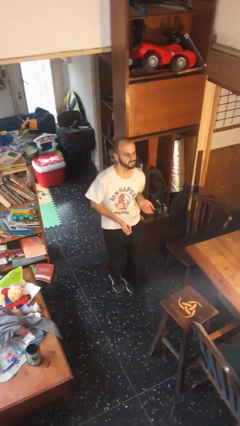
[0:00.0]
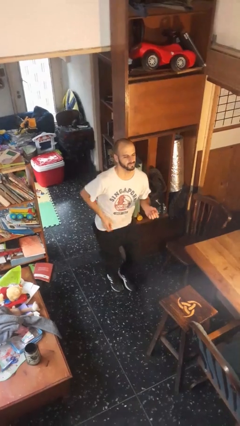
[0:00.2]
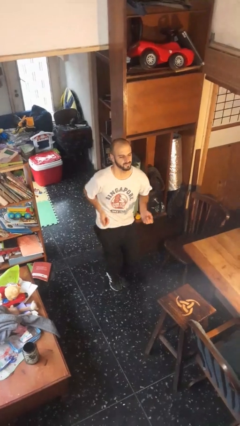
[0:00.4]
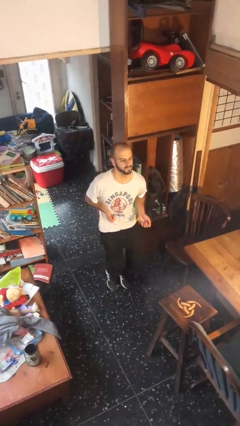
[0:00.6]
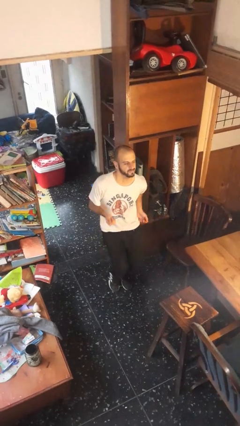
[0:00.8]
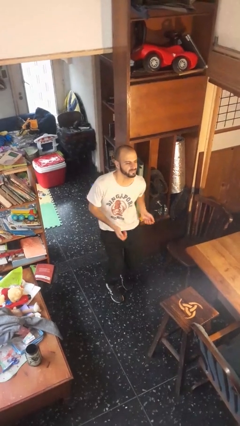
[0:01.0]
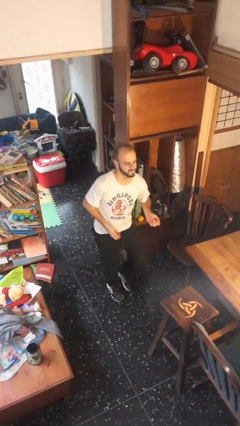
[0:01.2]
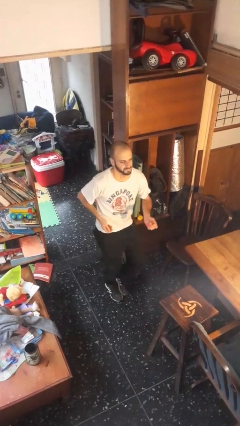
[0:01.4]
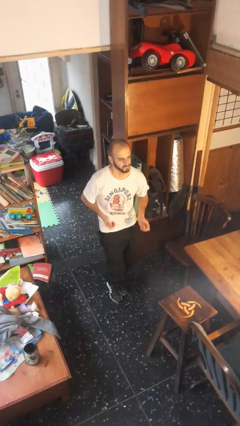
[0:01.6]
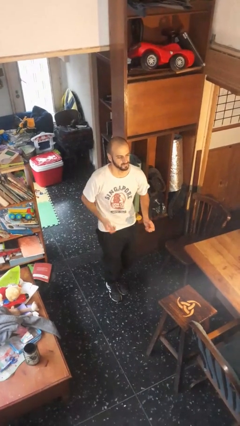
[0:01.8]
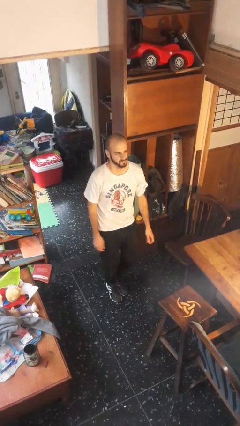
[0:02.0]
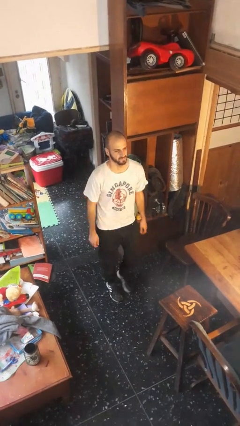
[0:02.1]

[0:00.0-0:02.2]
person dances in place

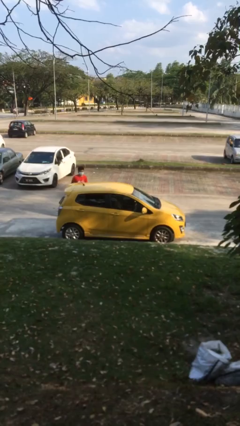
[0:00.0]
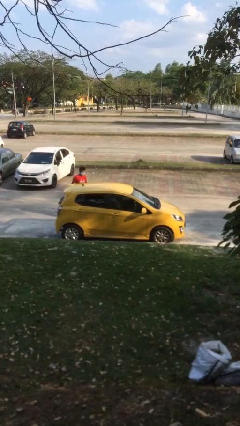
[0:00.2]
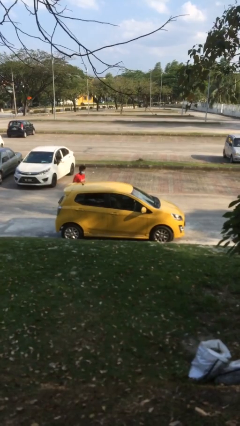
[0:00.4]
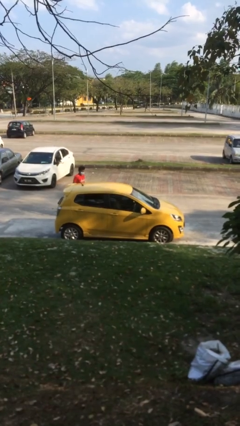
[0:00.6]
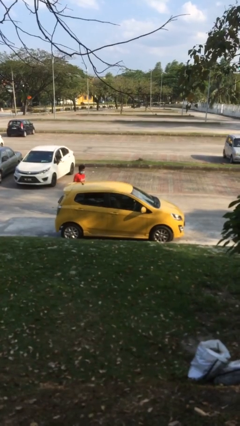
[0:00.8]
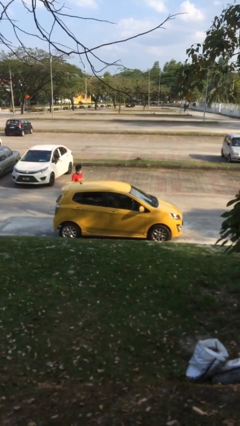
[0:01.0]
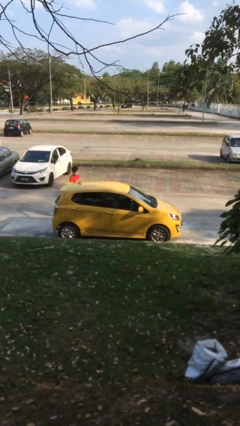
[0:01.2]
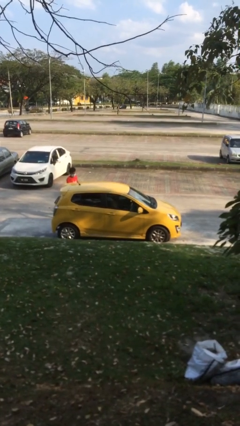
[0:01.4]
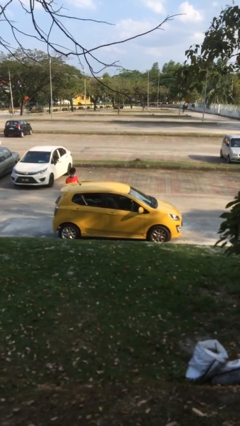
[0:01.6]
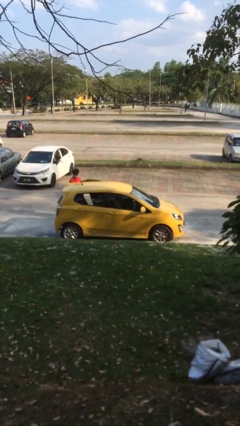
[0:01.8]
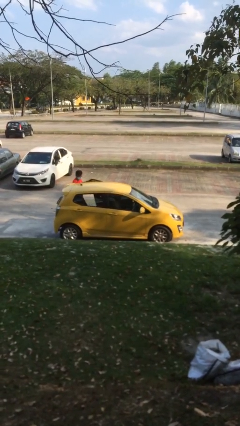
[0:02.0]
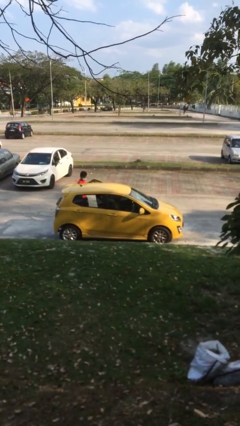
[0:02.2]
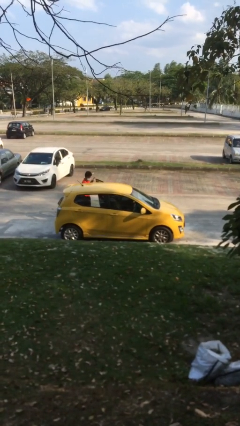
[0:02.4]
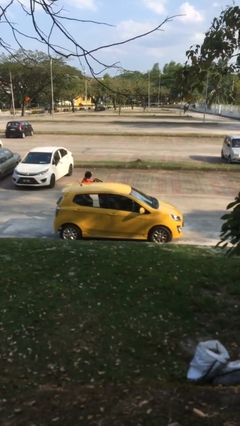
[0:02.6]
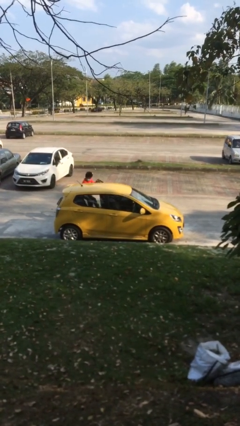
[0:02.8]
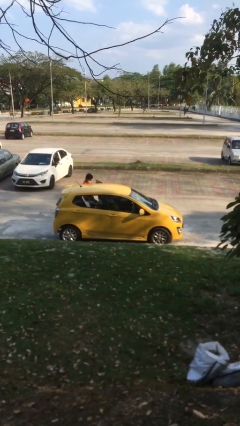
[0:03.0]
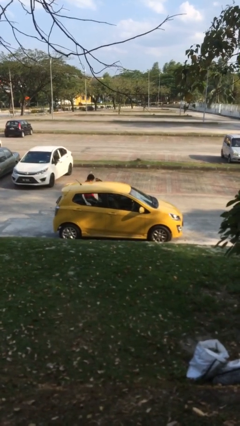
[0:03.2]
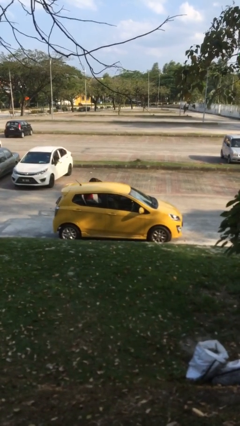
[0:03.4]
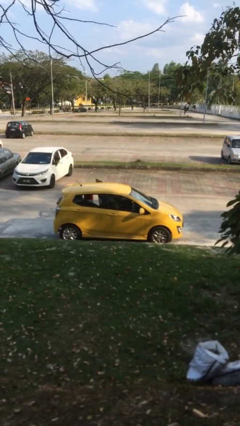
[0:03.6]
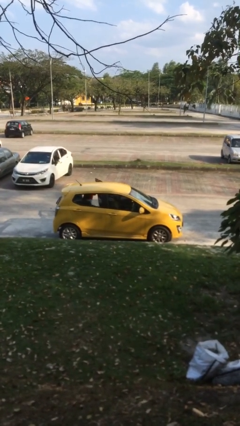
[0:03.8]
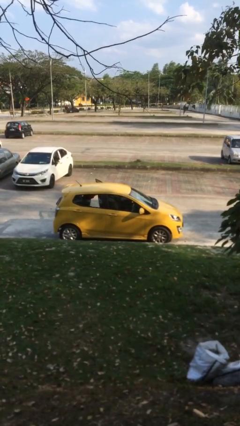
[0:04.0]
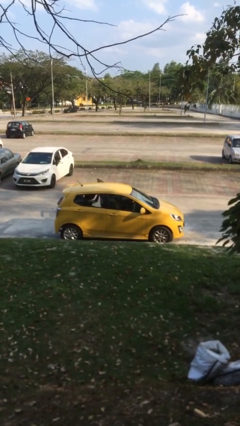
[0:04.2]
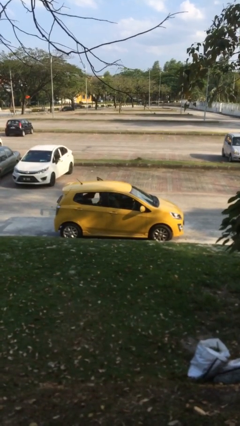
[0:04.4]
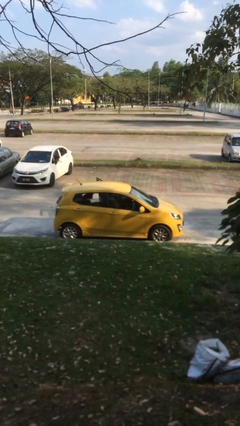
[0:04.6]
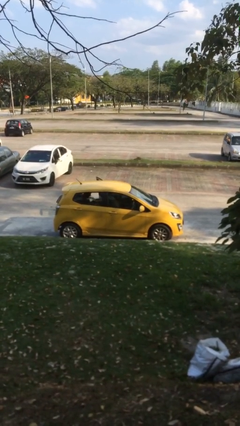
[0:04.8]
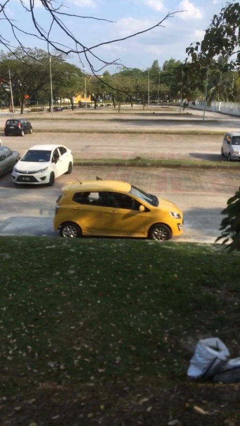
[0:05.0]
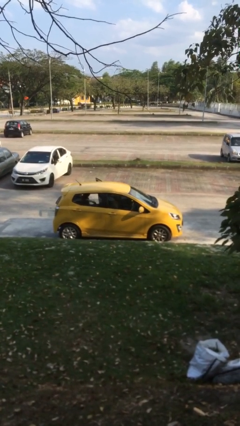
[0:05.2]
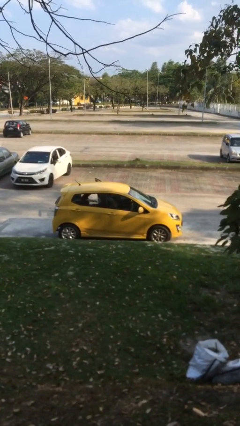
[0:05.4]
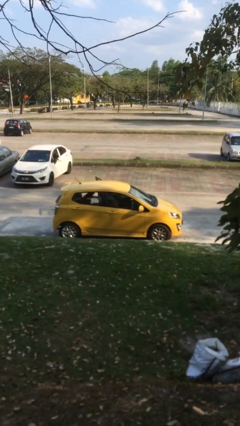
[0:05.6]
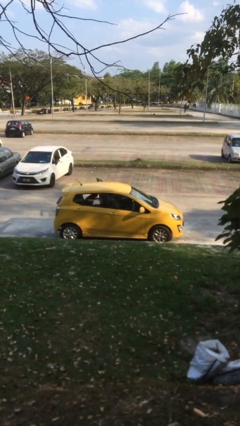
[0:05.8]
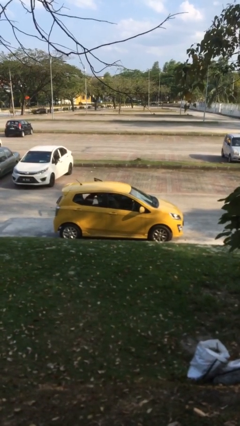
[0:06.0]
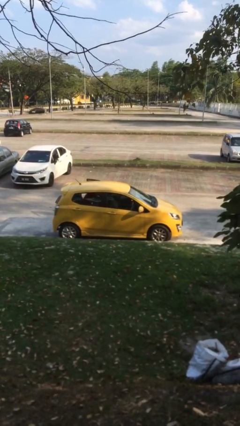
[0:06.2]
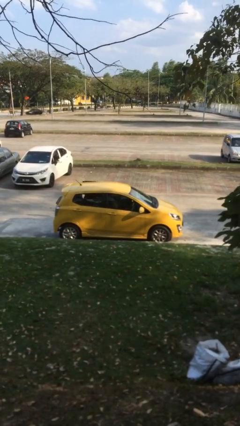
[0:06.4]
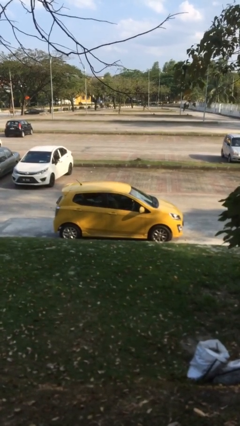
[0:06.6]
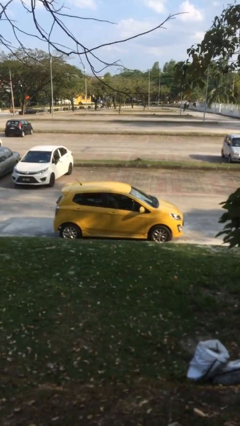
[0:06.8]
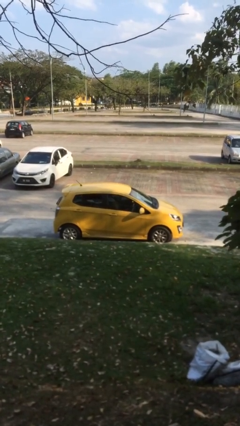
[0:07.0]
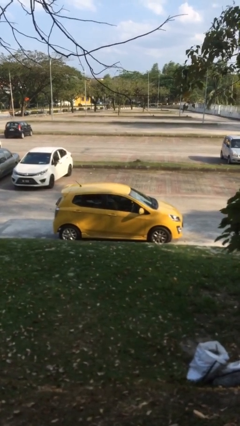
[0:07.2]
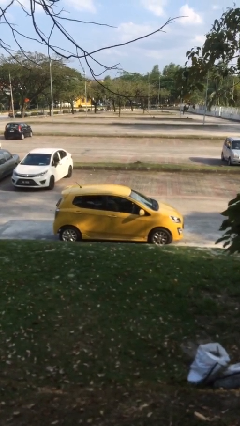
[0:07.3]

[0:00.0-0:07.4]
car picks up person

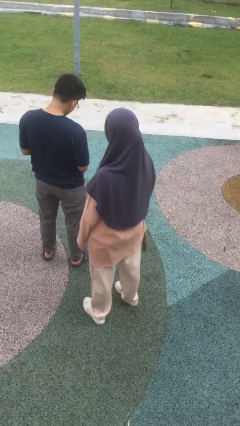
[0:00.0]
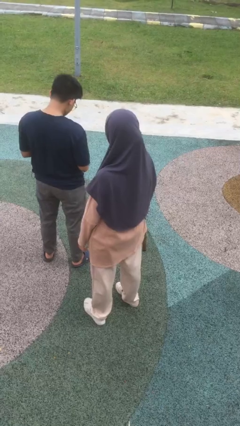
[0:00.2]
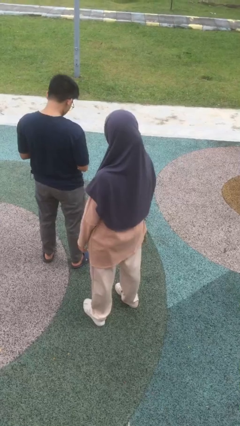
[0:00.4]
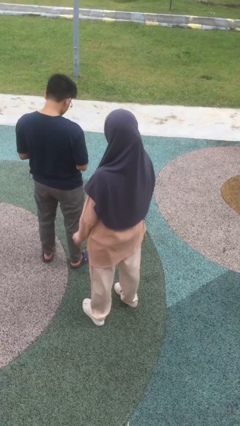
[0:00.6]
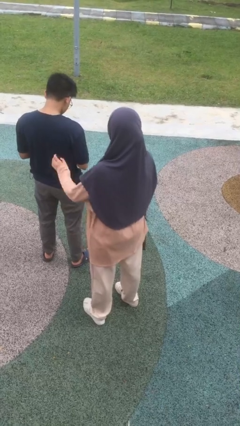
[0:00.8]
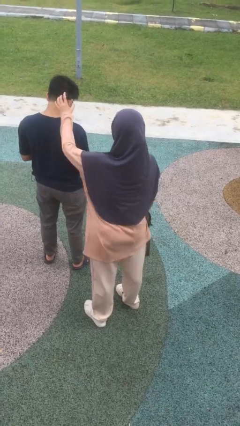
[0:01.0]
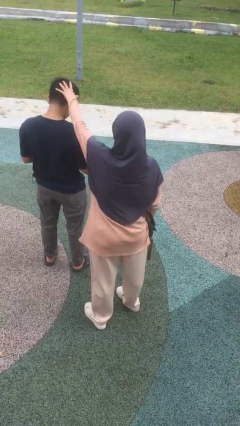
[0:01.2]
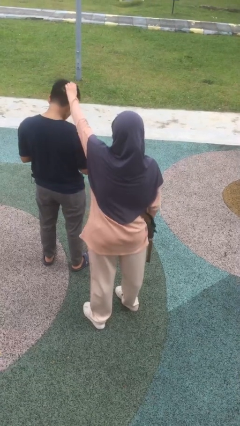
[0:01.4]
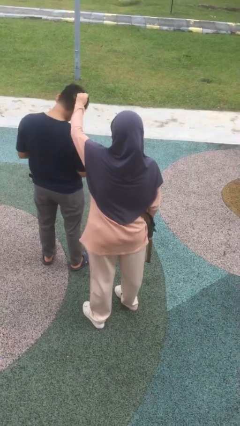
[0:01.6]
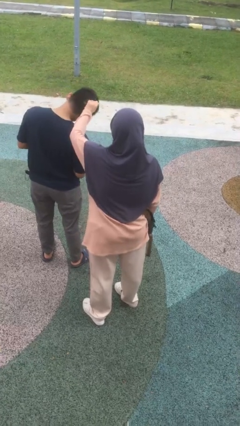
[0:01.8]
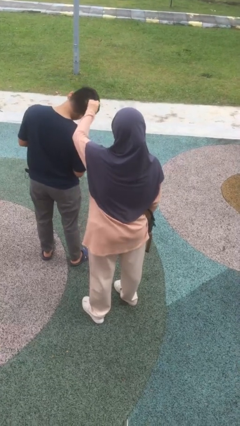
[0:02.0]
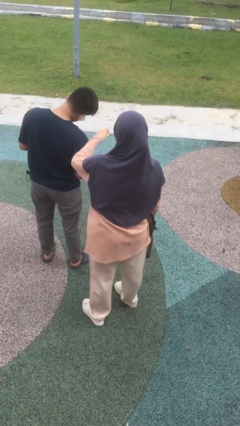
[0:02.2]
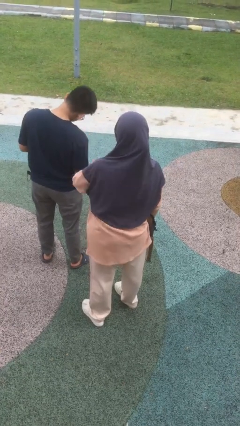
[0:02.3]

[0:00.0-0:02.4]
person grabs person by hair

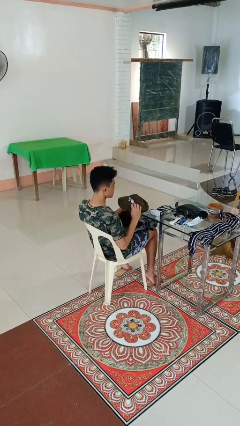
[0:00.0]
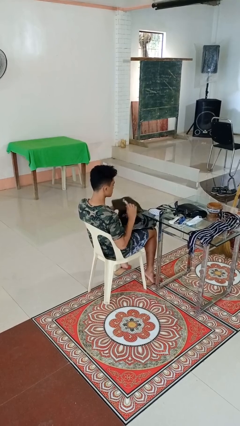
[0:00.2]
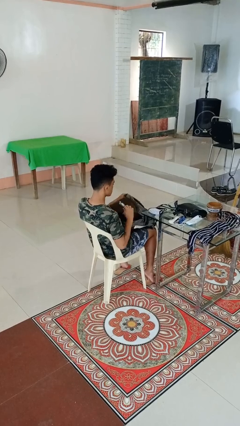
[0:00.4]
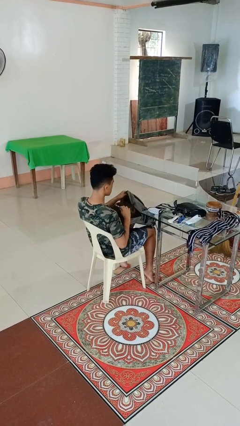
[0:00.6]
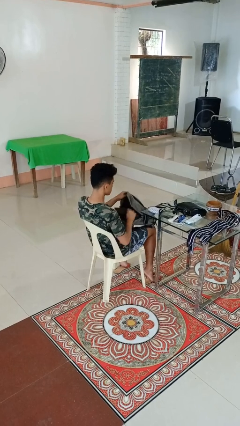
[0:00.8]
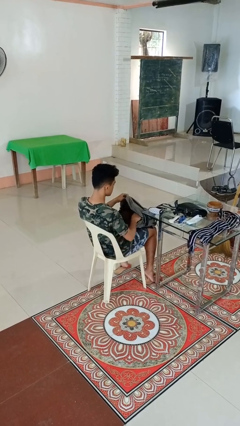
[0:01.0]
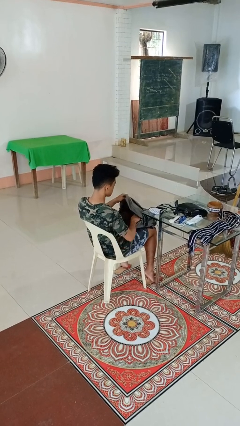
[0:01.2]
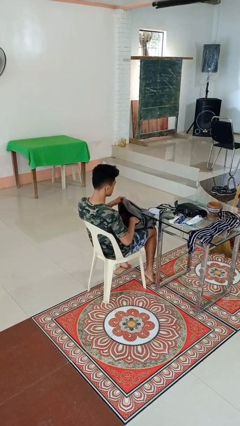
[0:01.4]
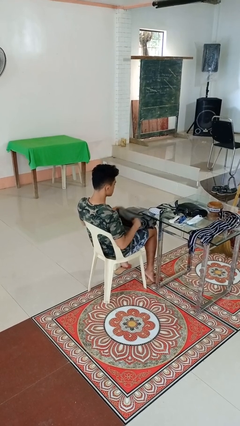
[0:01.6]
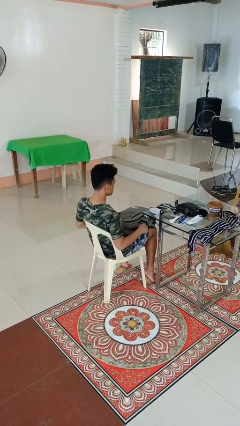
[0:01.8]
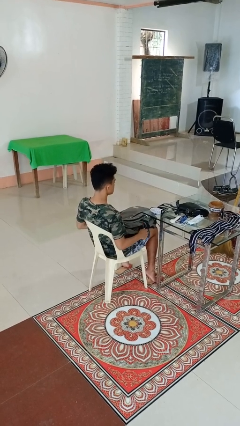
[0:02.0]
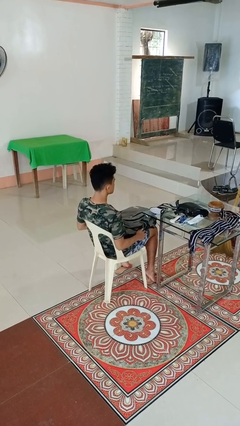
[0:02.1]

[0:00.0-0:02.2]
person puts object into backpack

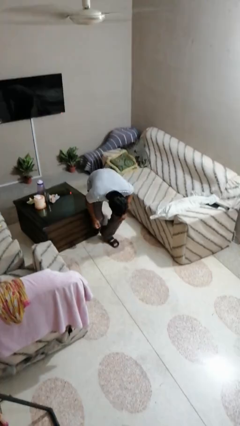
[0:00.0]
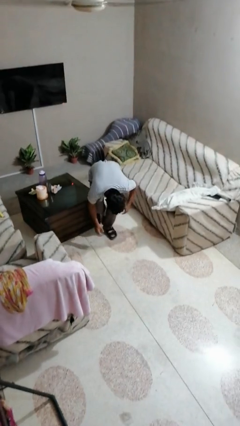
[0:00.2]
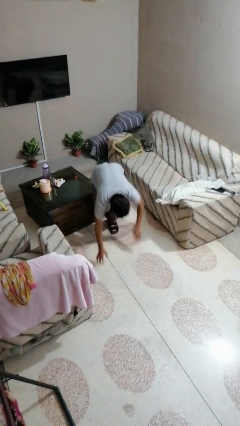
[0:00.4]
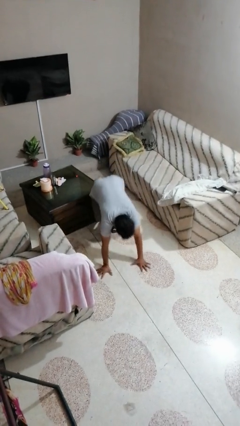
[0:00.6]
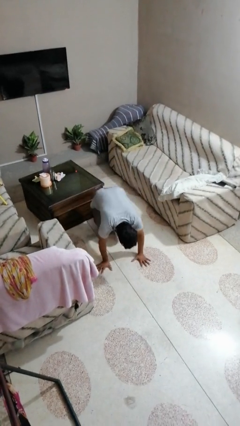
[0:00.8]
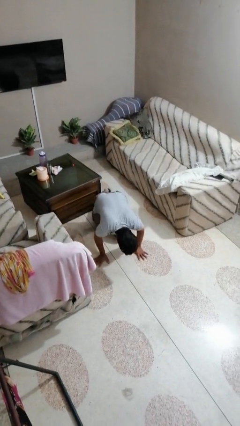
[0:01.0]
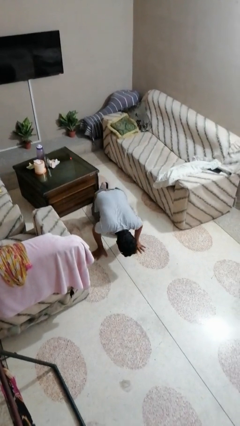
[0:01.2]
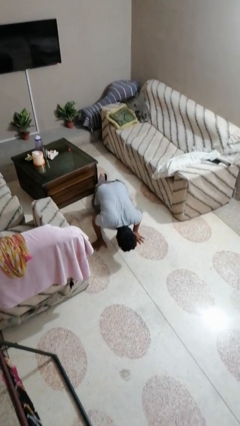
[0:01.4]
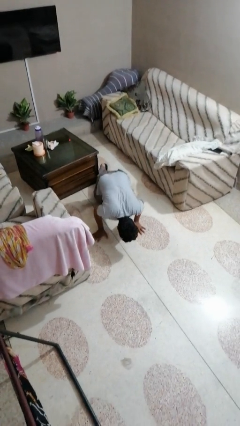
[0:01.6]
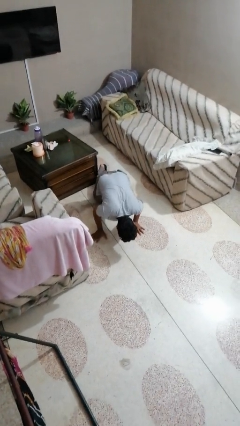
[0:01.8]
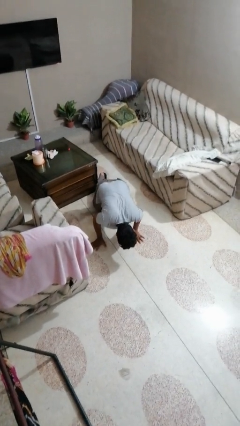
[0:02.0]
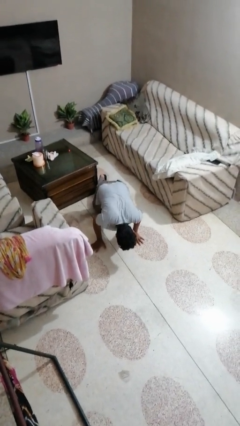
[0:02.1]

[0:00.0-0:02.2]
person lies down on floor

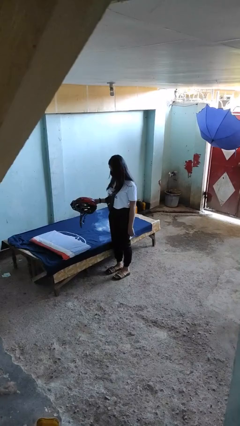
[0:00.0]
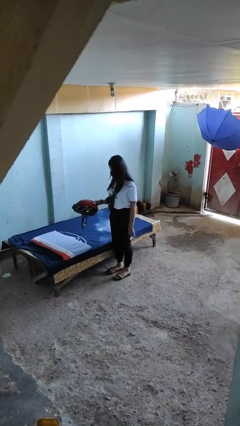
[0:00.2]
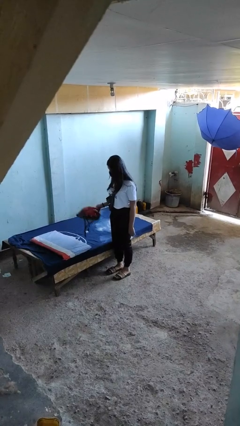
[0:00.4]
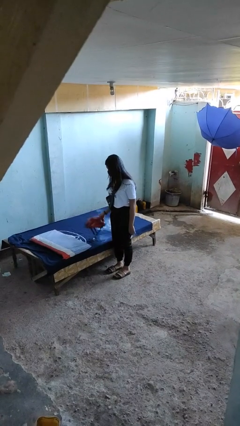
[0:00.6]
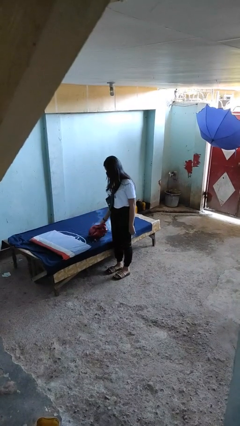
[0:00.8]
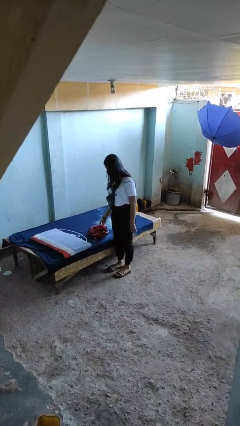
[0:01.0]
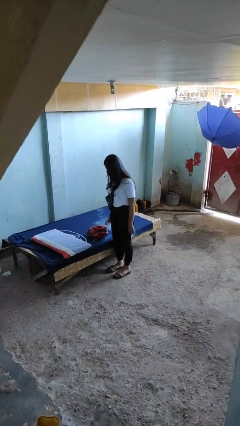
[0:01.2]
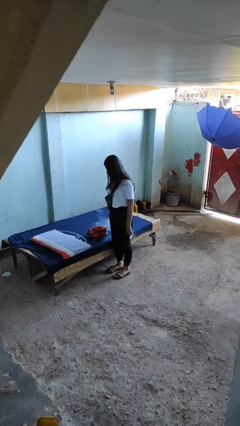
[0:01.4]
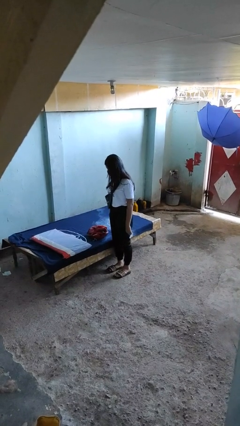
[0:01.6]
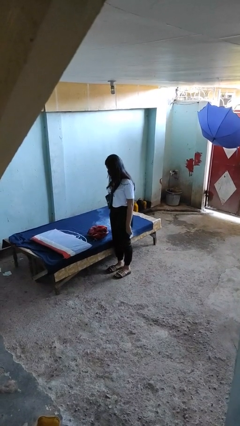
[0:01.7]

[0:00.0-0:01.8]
person puts down object on bed
